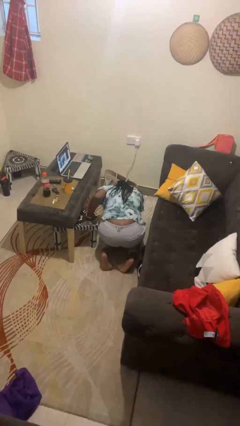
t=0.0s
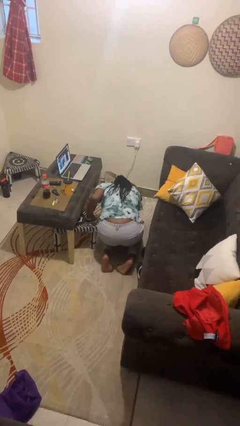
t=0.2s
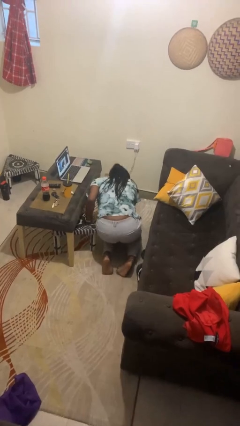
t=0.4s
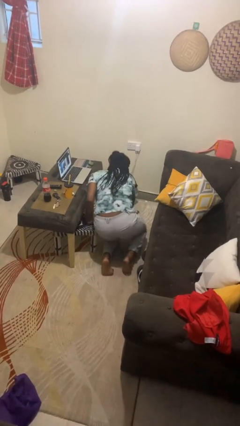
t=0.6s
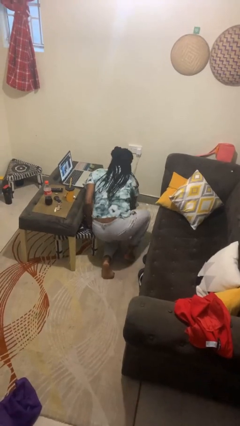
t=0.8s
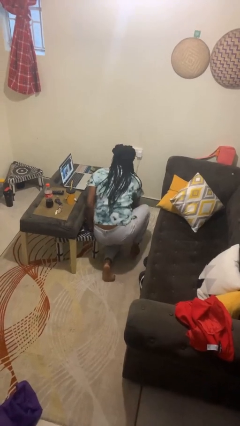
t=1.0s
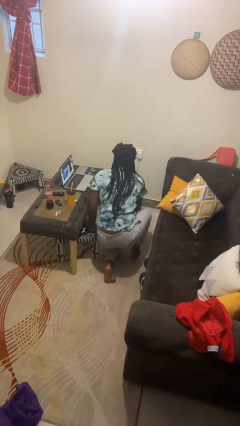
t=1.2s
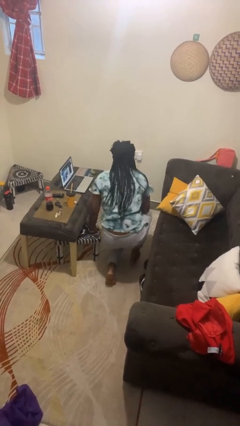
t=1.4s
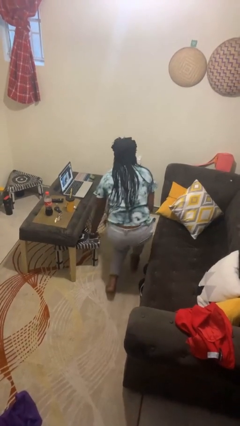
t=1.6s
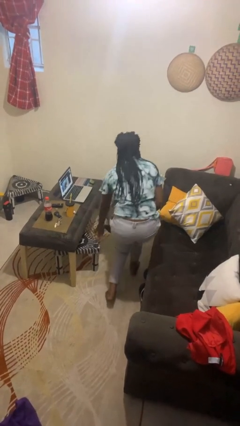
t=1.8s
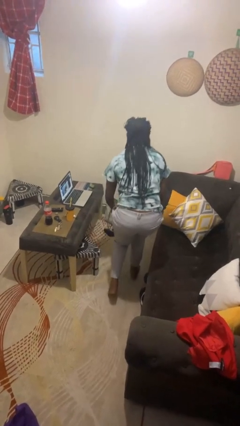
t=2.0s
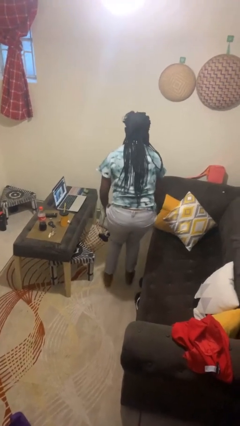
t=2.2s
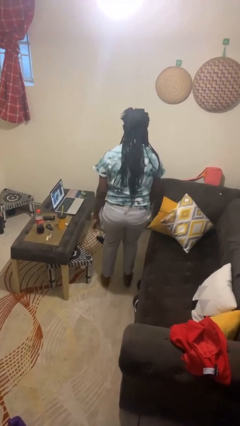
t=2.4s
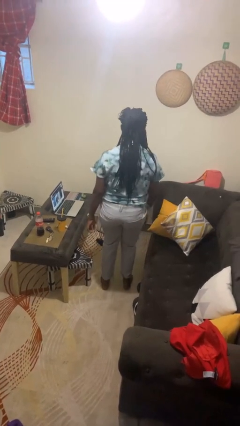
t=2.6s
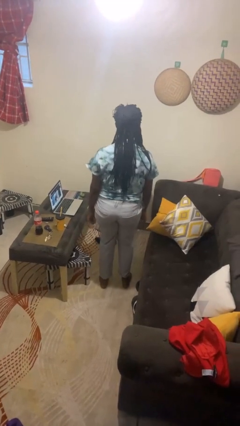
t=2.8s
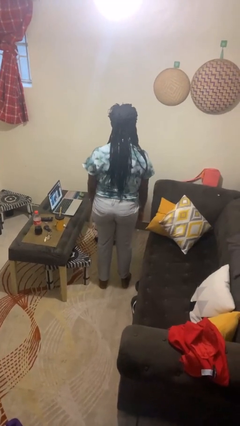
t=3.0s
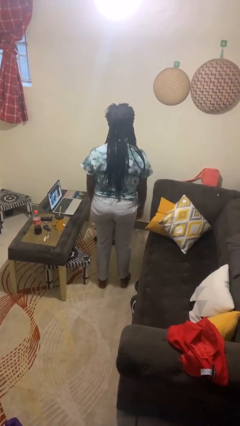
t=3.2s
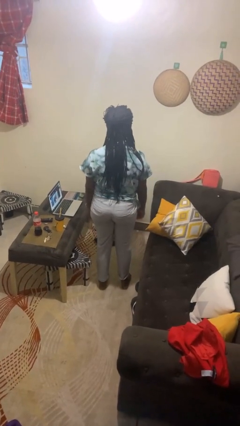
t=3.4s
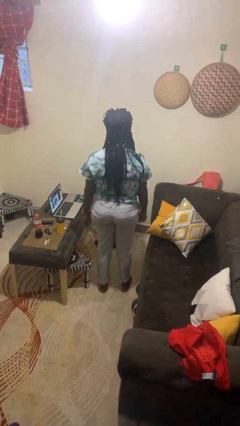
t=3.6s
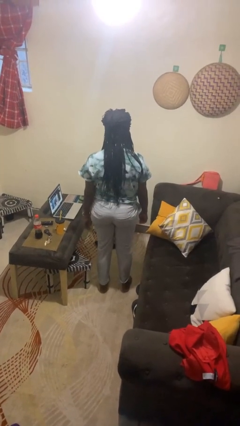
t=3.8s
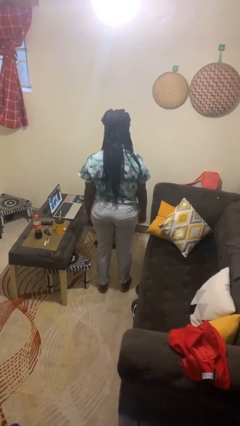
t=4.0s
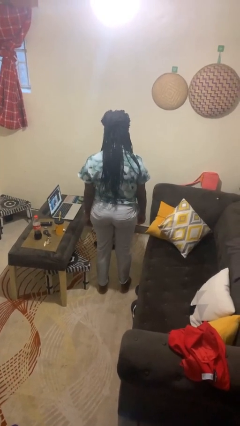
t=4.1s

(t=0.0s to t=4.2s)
person stands up from floor

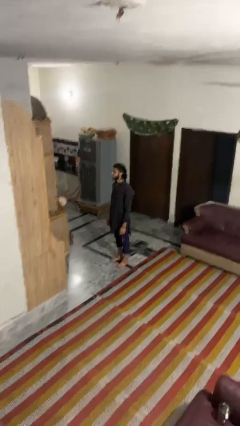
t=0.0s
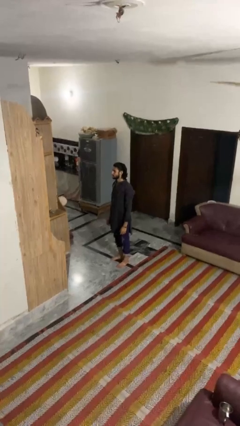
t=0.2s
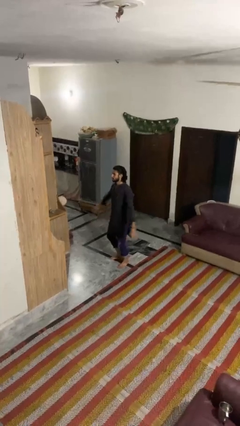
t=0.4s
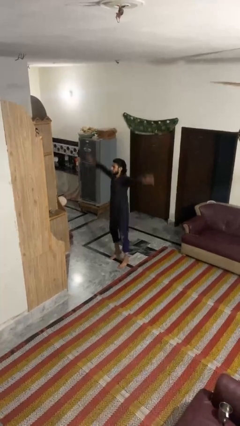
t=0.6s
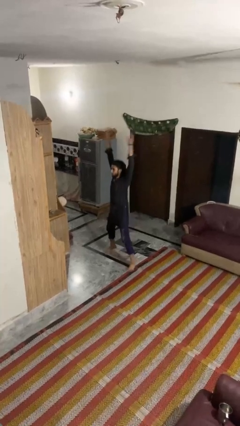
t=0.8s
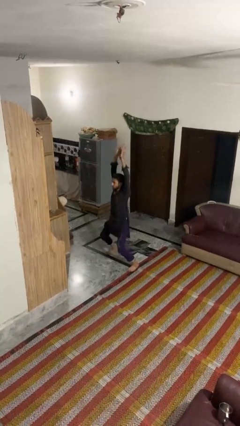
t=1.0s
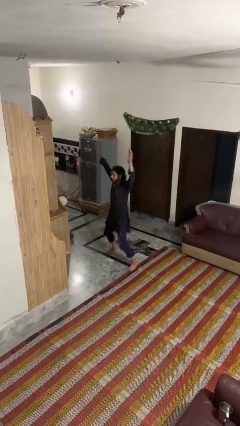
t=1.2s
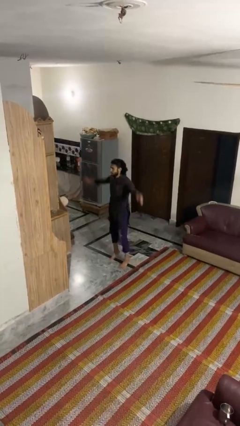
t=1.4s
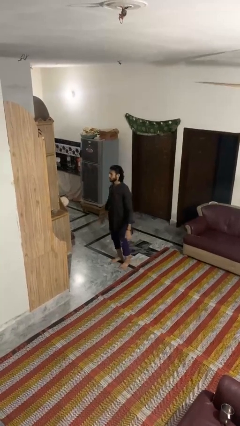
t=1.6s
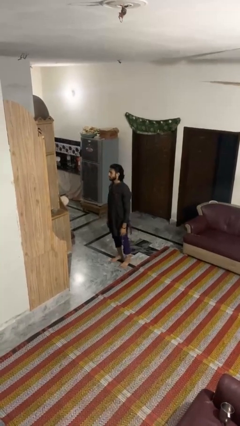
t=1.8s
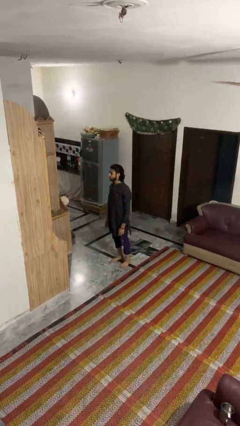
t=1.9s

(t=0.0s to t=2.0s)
person exercises with jumping jacks

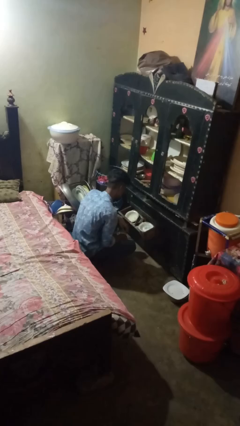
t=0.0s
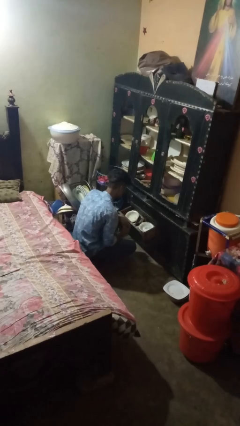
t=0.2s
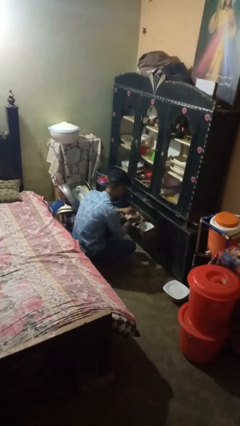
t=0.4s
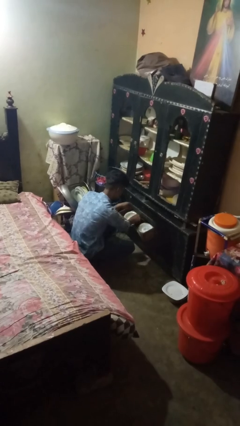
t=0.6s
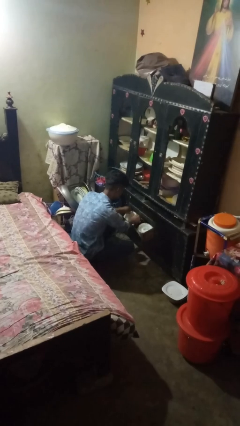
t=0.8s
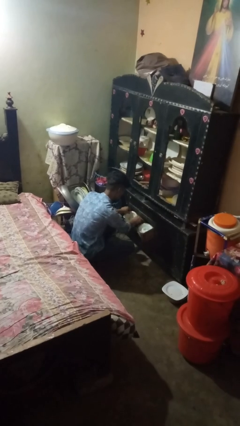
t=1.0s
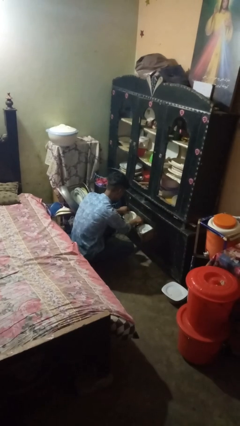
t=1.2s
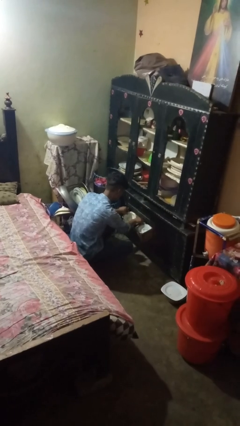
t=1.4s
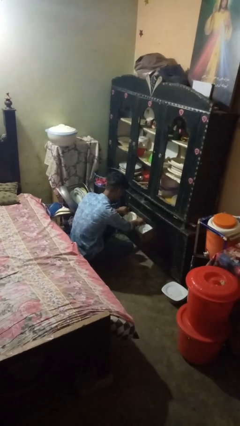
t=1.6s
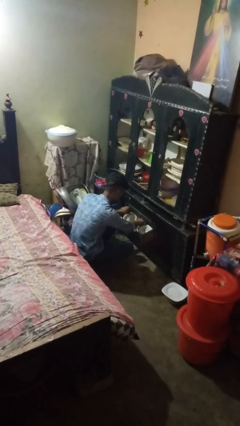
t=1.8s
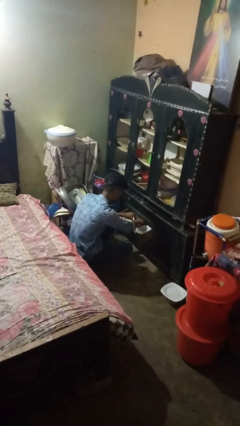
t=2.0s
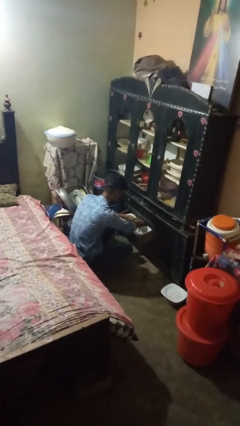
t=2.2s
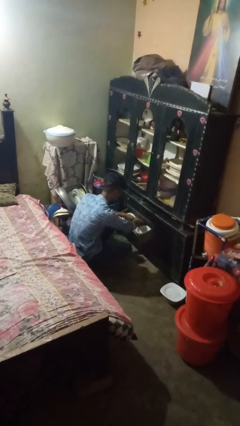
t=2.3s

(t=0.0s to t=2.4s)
person searches in kitchen drawer

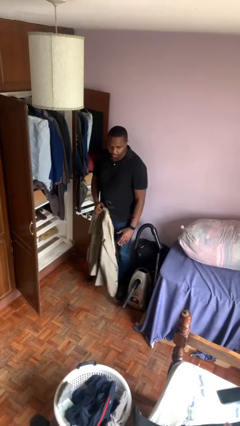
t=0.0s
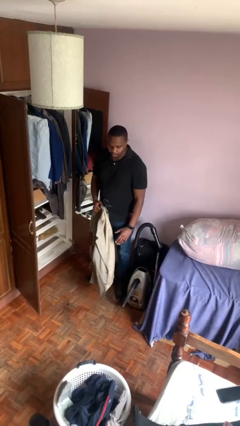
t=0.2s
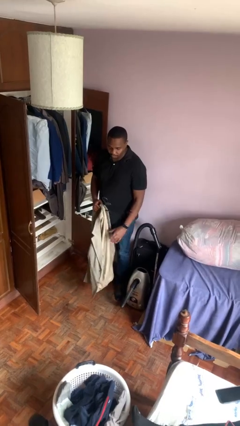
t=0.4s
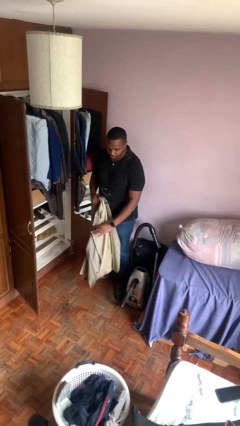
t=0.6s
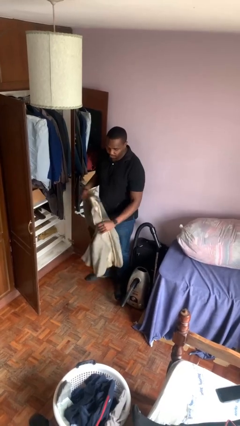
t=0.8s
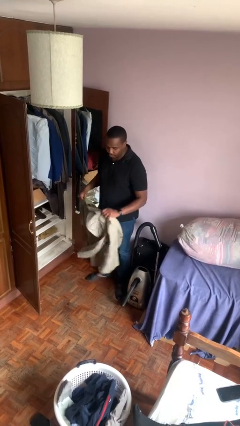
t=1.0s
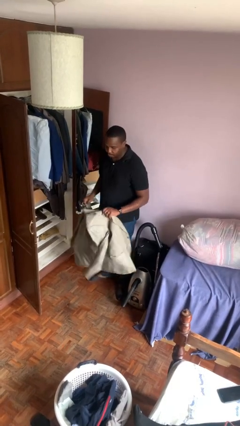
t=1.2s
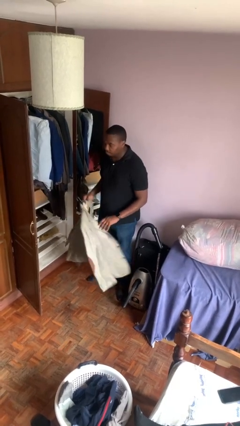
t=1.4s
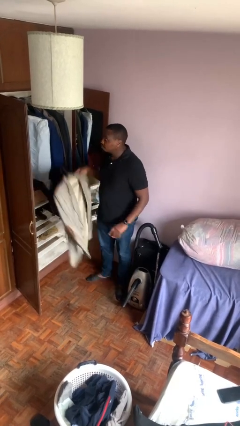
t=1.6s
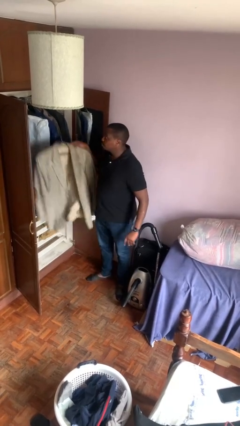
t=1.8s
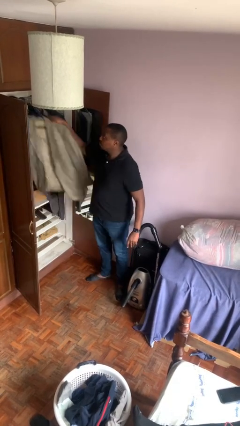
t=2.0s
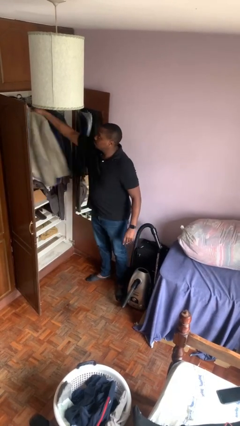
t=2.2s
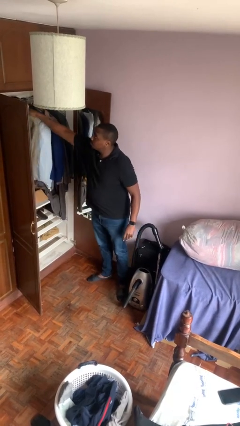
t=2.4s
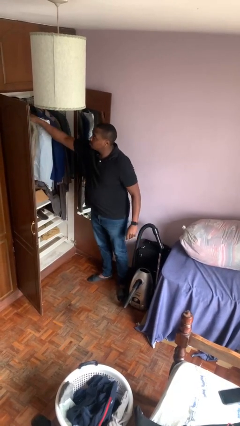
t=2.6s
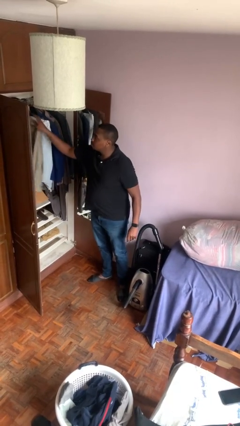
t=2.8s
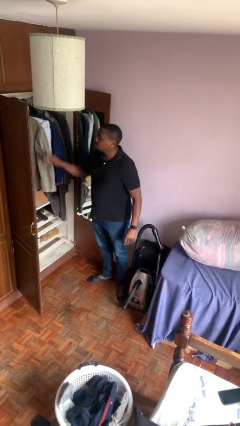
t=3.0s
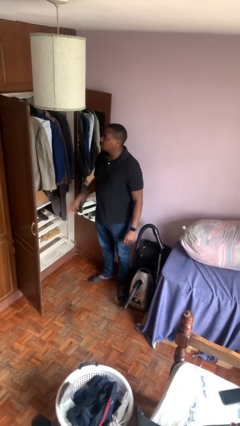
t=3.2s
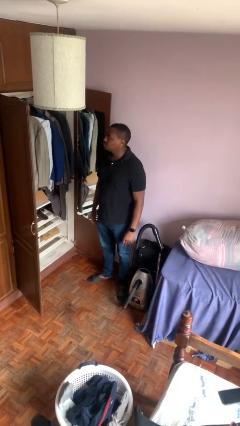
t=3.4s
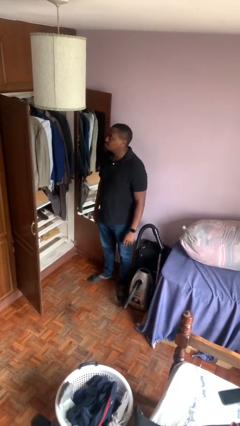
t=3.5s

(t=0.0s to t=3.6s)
person puts clothes into closet

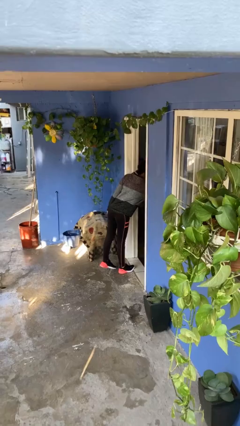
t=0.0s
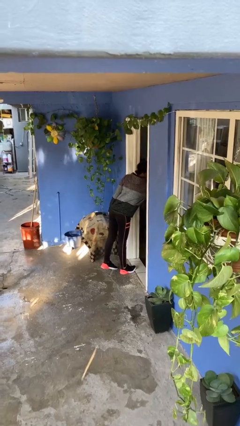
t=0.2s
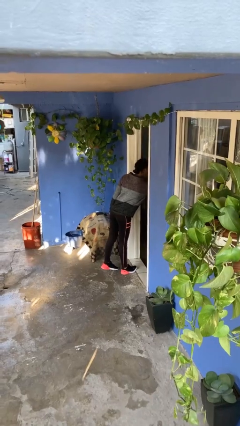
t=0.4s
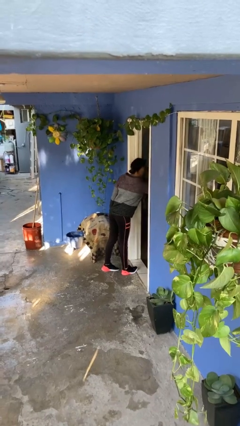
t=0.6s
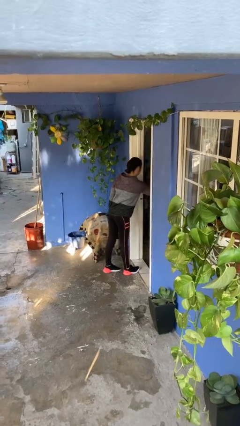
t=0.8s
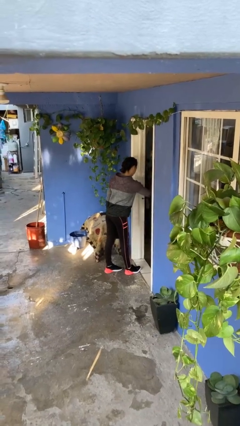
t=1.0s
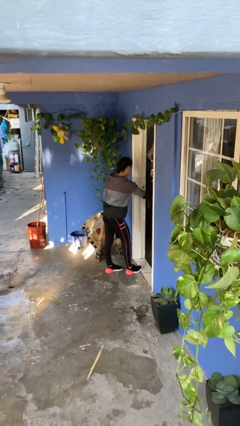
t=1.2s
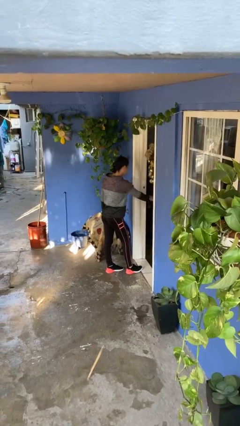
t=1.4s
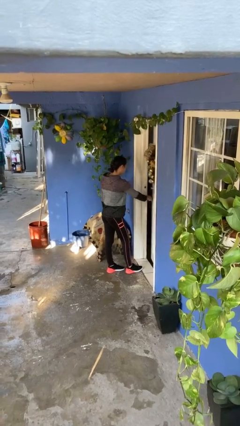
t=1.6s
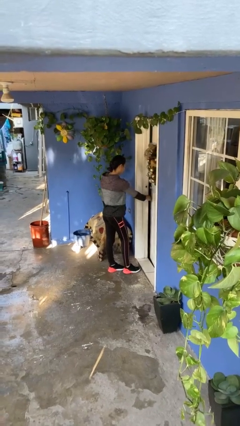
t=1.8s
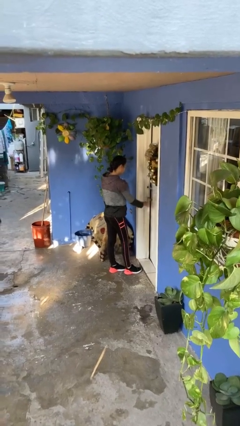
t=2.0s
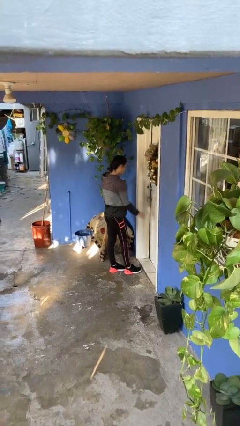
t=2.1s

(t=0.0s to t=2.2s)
person closes facility door

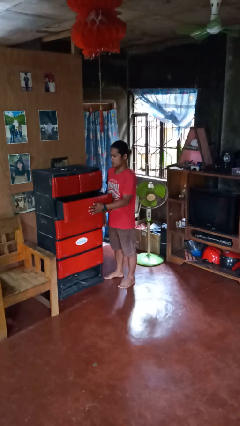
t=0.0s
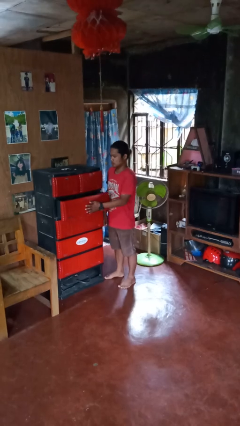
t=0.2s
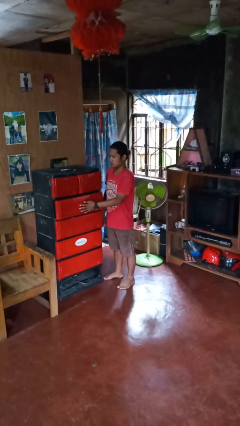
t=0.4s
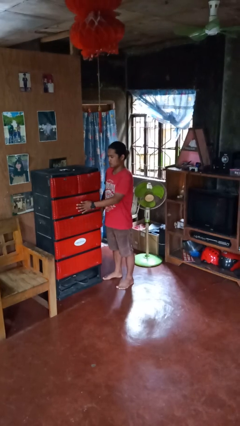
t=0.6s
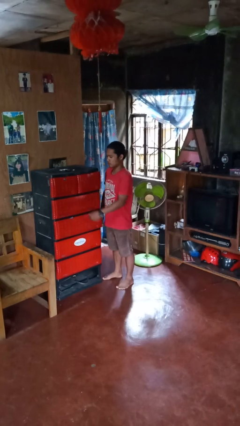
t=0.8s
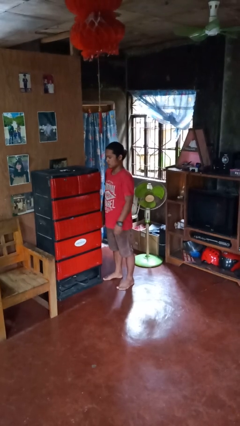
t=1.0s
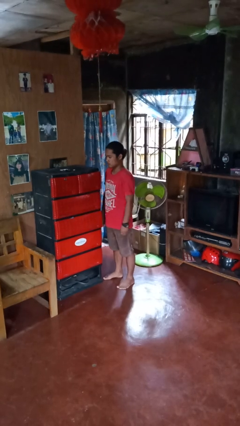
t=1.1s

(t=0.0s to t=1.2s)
person closes dresser drawer

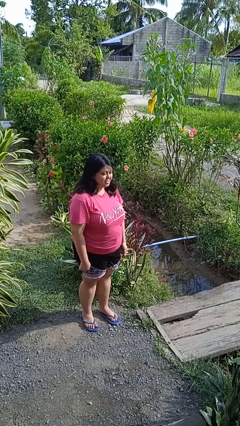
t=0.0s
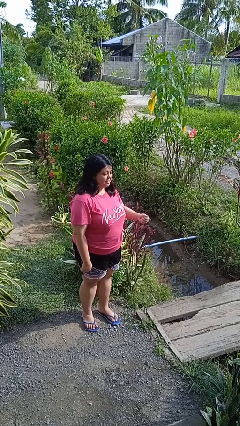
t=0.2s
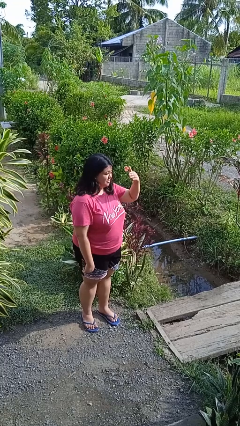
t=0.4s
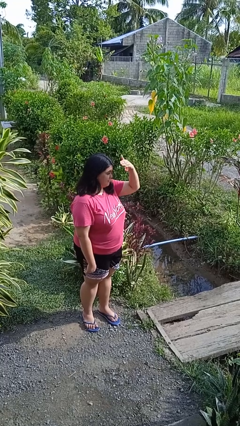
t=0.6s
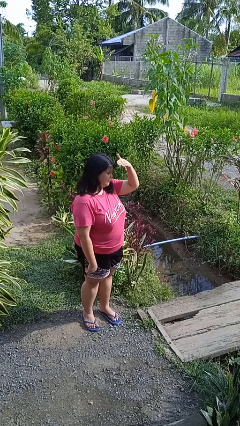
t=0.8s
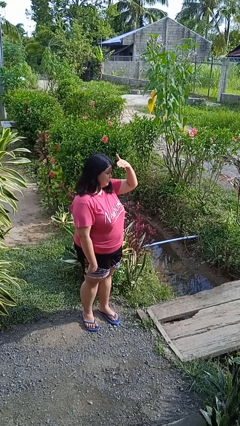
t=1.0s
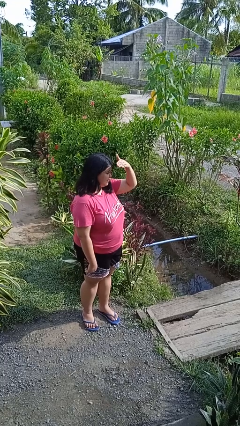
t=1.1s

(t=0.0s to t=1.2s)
person shades eyes

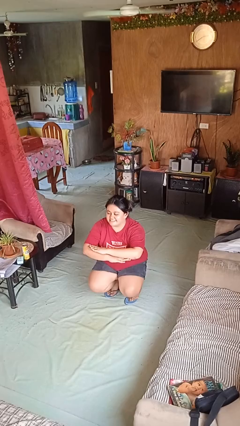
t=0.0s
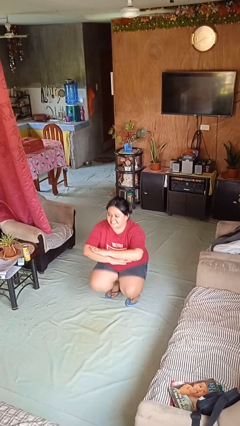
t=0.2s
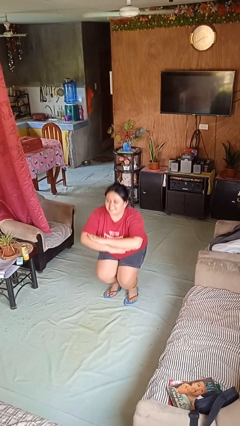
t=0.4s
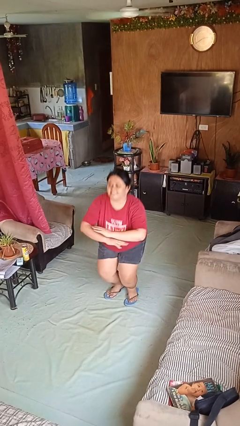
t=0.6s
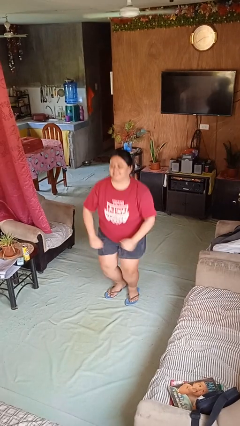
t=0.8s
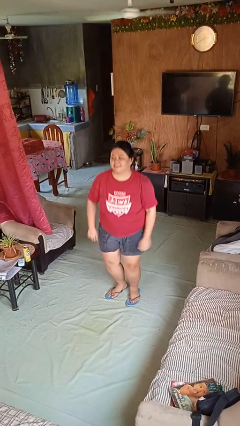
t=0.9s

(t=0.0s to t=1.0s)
person stands up
